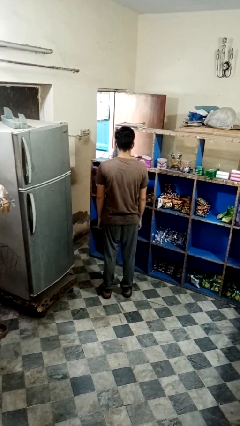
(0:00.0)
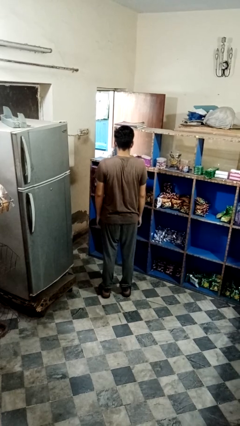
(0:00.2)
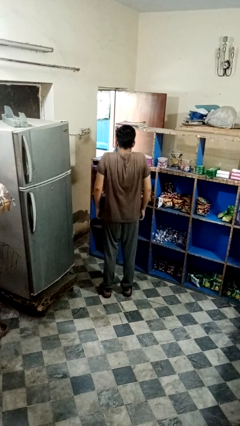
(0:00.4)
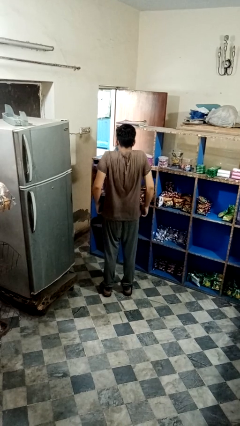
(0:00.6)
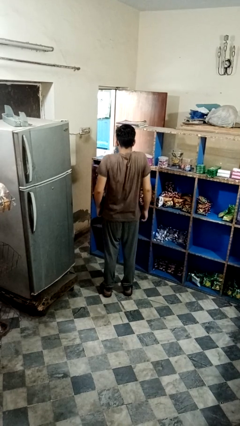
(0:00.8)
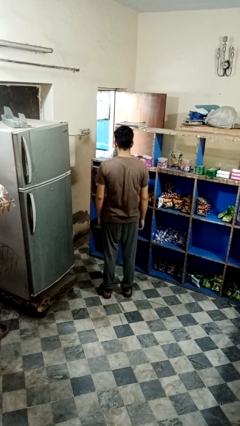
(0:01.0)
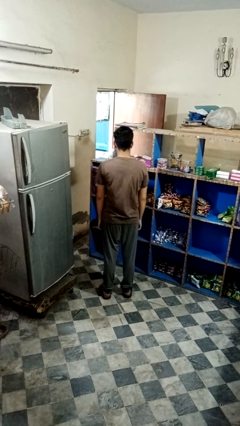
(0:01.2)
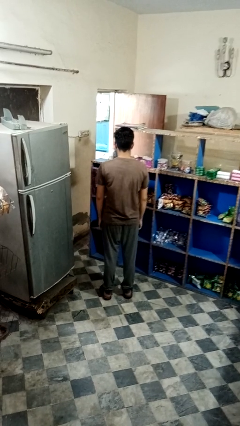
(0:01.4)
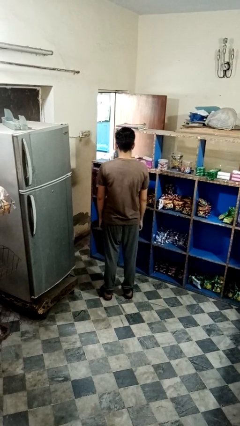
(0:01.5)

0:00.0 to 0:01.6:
person shrugs

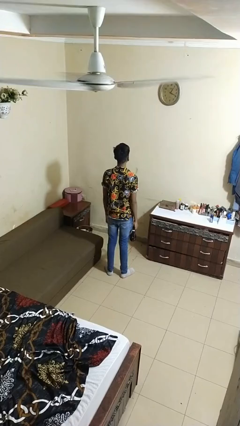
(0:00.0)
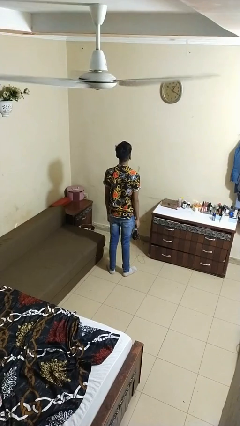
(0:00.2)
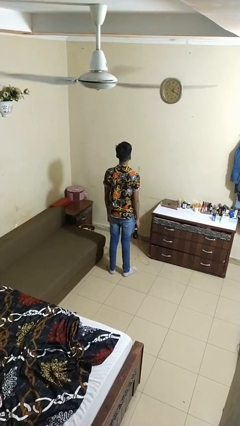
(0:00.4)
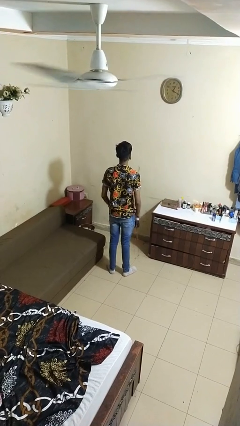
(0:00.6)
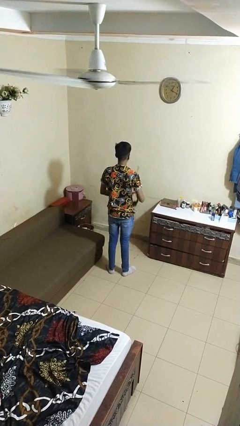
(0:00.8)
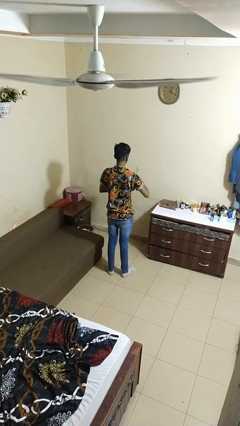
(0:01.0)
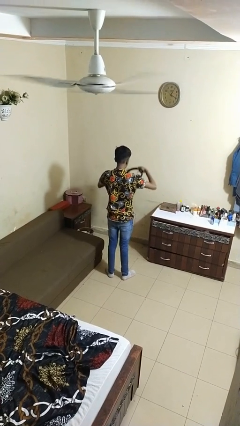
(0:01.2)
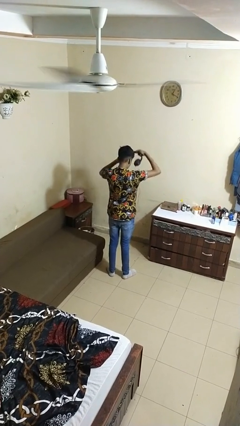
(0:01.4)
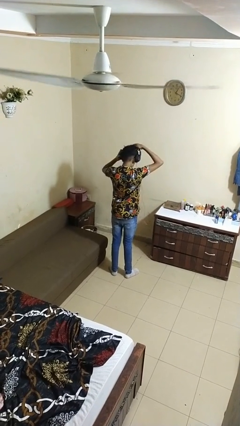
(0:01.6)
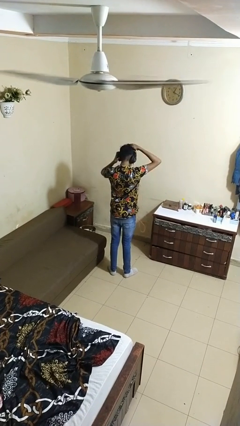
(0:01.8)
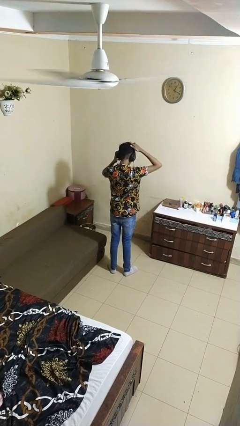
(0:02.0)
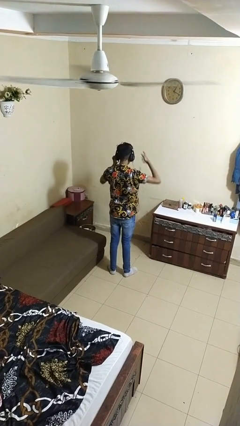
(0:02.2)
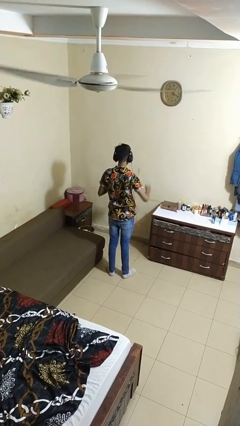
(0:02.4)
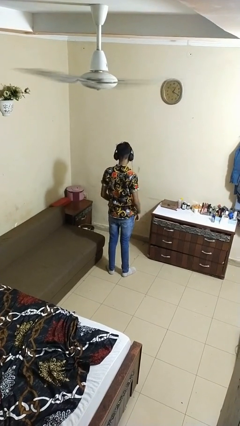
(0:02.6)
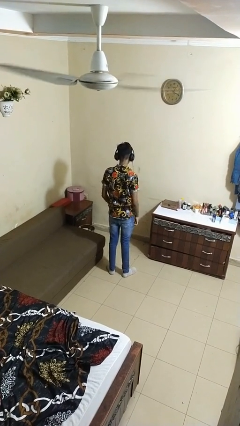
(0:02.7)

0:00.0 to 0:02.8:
person puts on headphones

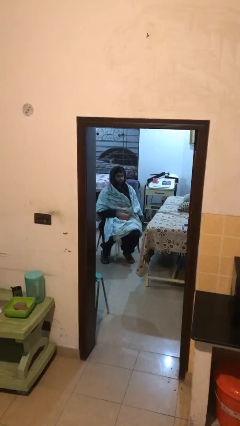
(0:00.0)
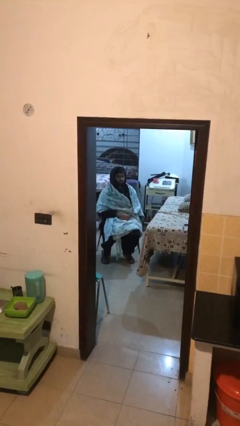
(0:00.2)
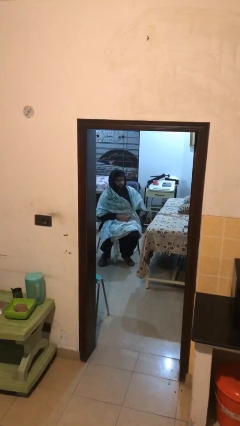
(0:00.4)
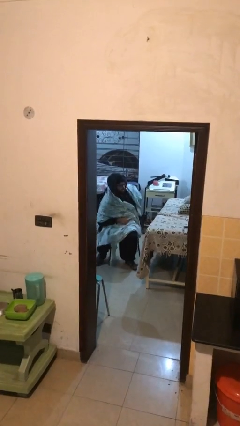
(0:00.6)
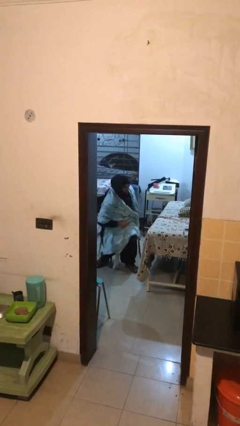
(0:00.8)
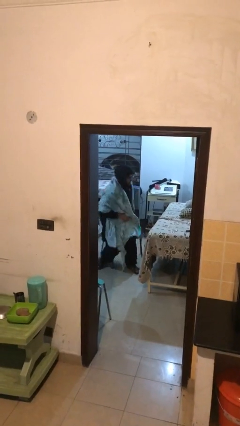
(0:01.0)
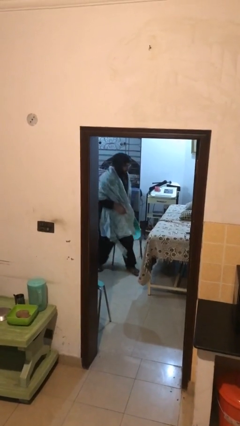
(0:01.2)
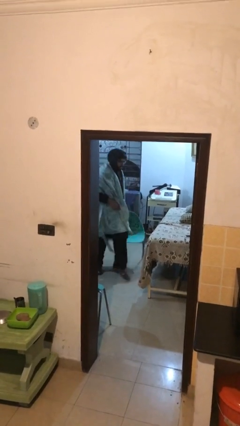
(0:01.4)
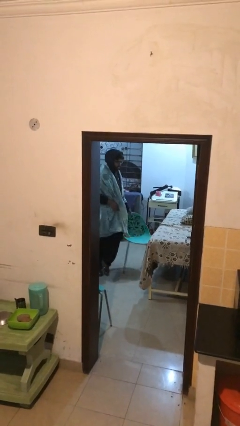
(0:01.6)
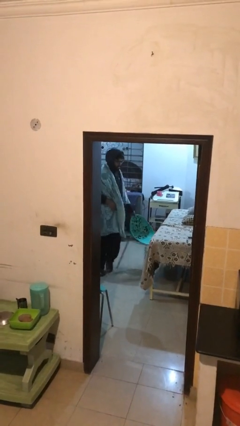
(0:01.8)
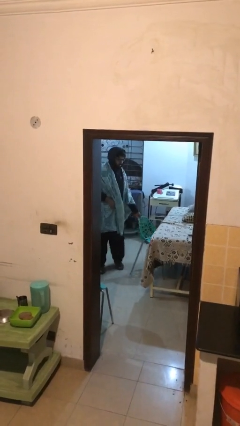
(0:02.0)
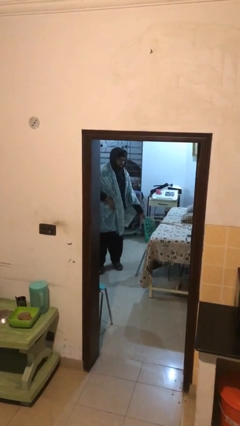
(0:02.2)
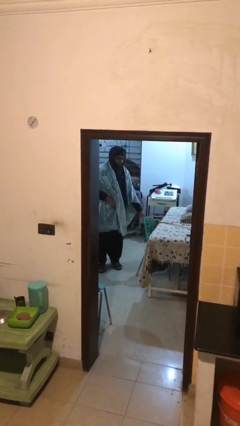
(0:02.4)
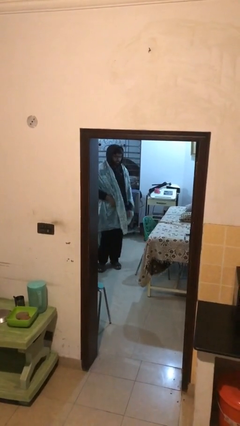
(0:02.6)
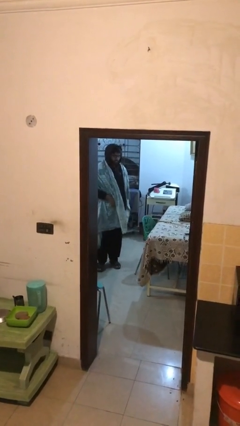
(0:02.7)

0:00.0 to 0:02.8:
person stands up

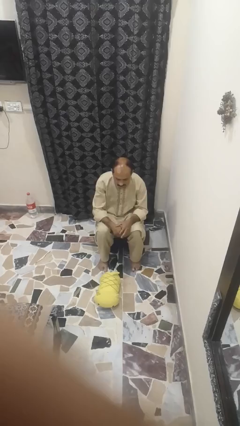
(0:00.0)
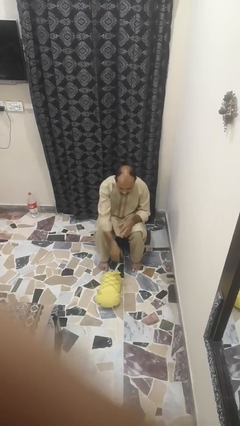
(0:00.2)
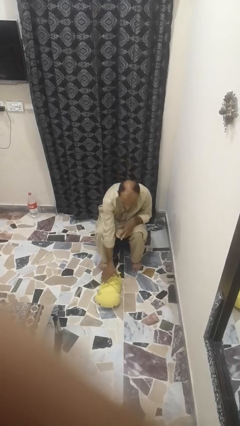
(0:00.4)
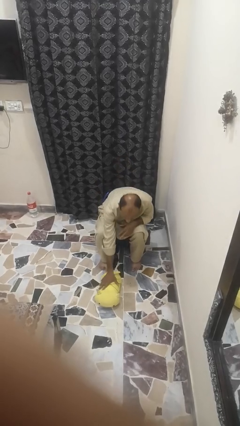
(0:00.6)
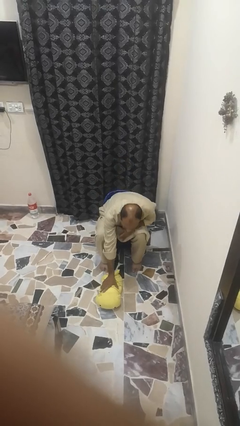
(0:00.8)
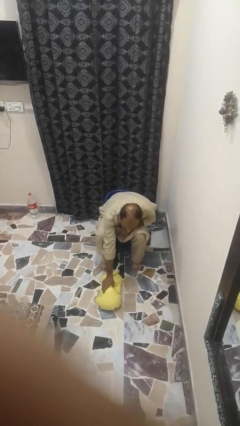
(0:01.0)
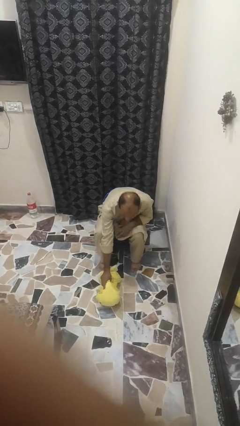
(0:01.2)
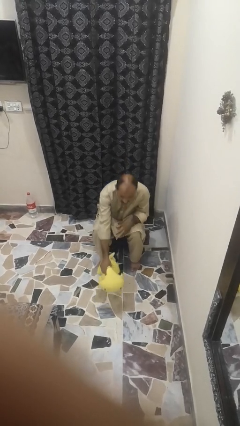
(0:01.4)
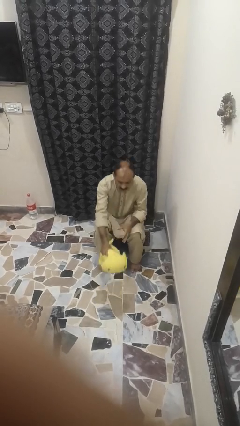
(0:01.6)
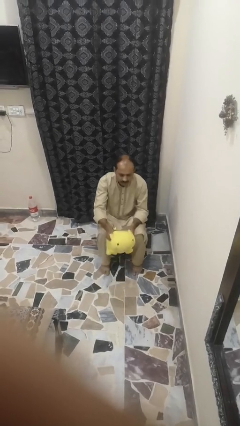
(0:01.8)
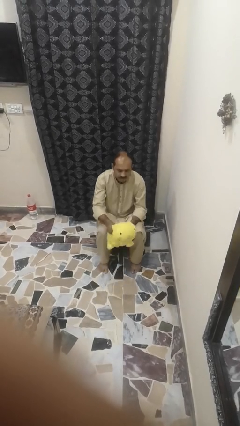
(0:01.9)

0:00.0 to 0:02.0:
person picks up object from floor

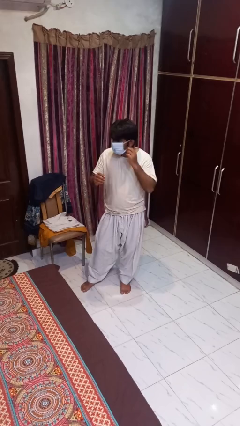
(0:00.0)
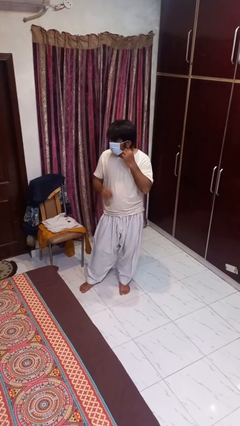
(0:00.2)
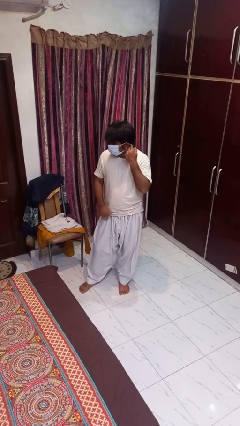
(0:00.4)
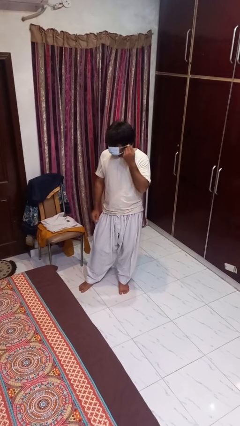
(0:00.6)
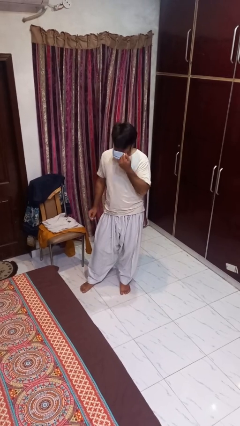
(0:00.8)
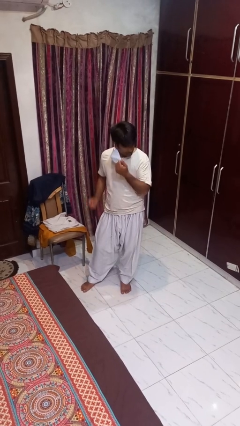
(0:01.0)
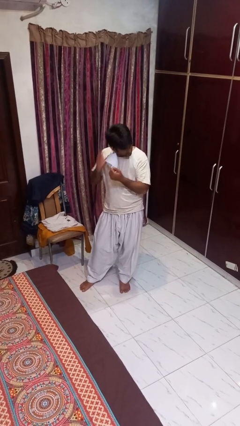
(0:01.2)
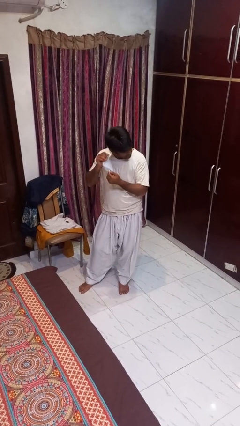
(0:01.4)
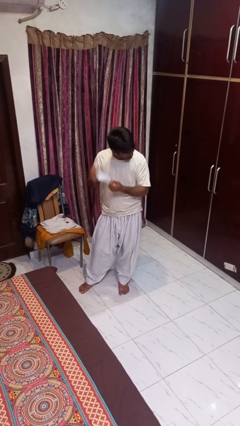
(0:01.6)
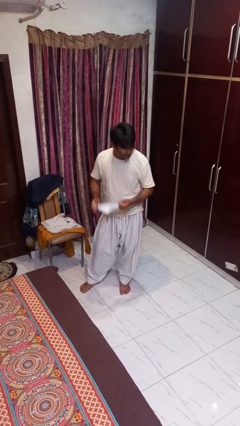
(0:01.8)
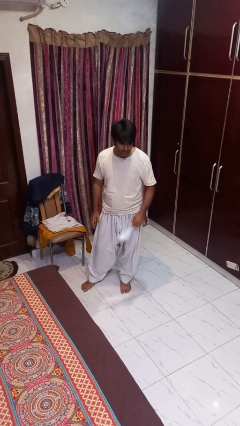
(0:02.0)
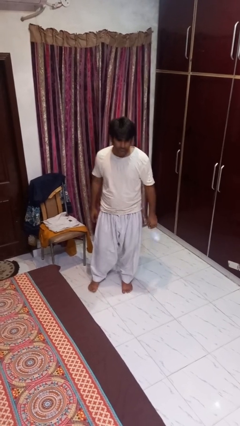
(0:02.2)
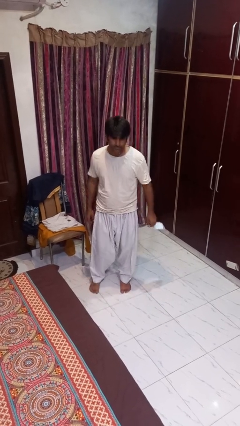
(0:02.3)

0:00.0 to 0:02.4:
person takes off facemask

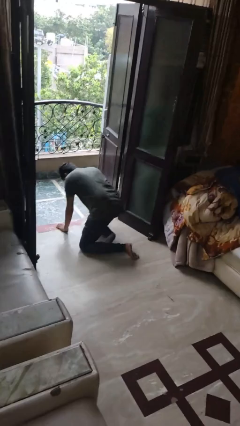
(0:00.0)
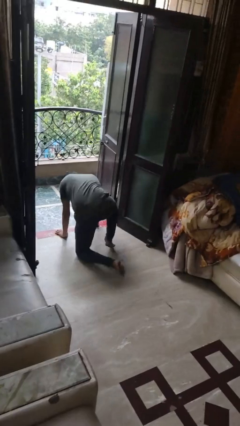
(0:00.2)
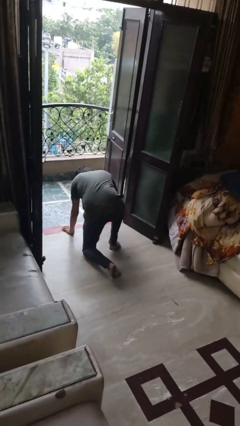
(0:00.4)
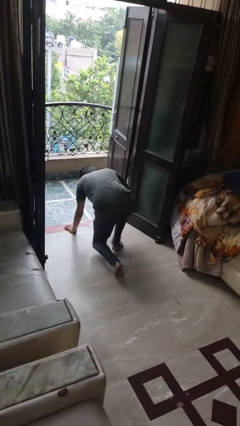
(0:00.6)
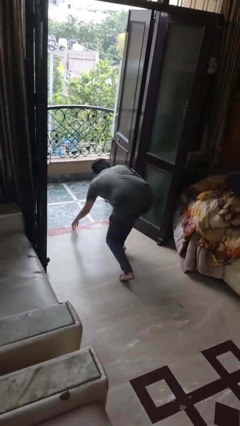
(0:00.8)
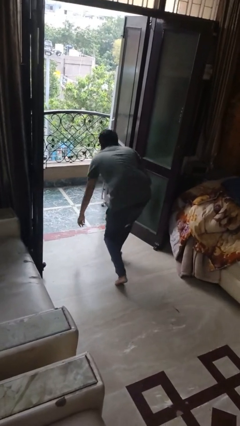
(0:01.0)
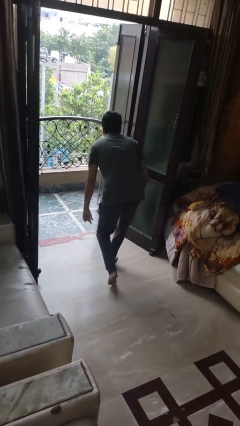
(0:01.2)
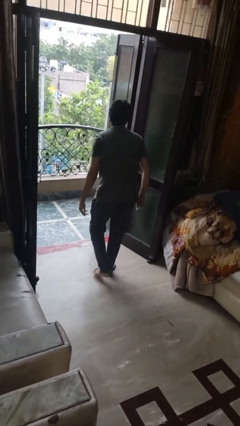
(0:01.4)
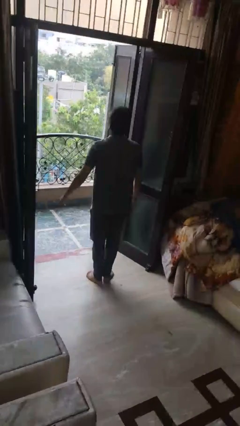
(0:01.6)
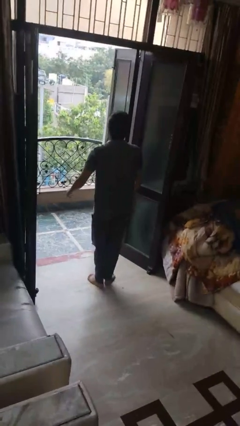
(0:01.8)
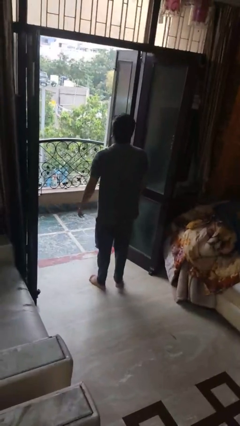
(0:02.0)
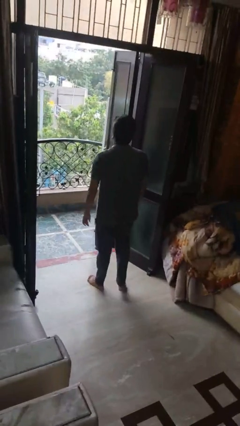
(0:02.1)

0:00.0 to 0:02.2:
person stands up from floor

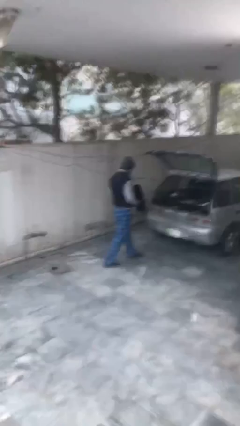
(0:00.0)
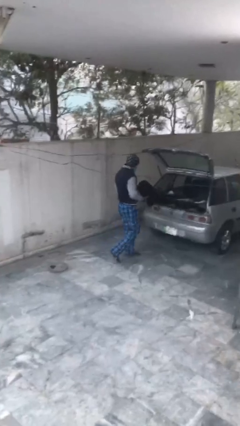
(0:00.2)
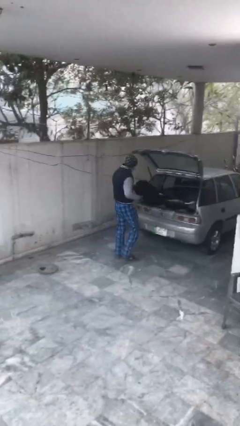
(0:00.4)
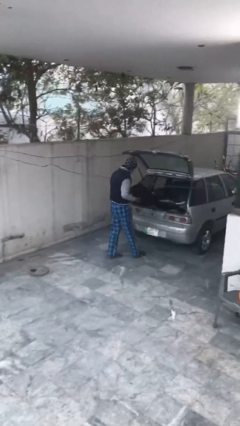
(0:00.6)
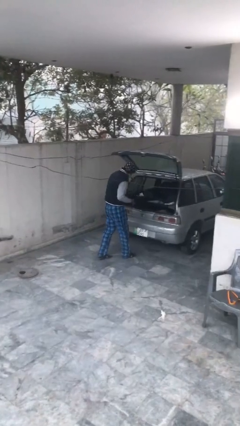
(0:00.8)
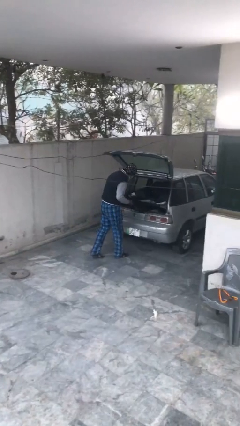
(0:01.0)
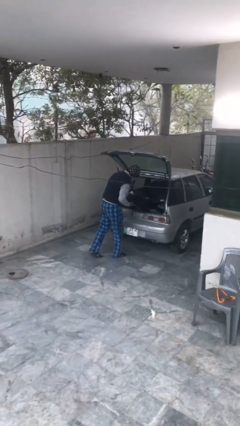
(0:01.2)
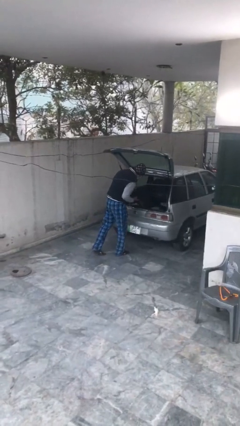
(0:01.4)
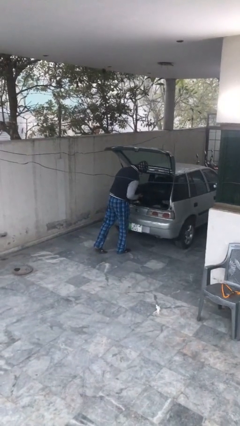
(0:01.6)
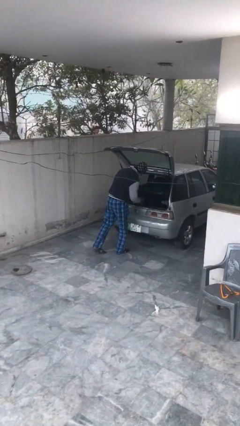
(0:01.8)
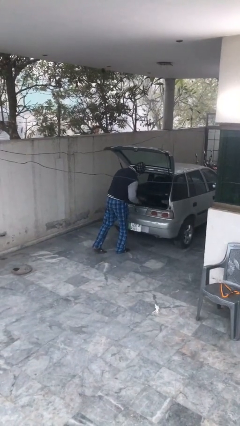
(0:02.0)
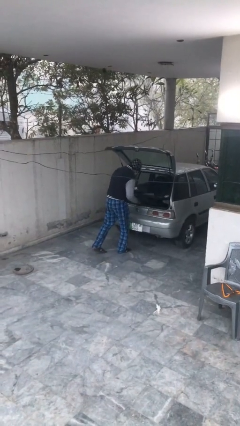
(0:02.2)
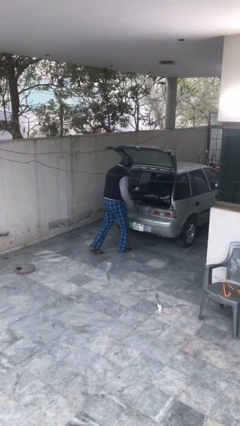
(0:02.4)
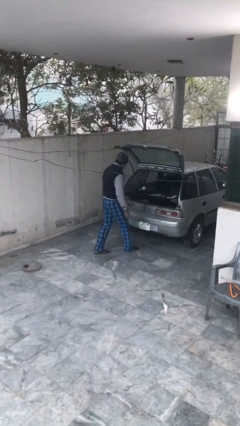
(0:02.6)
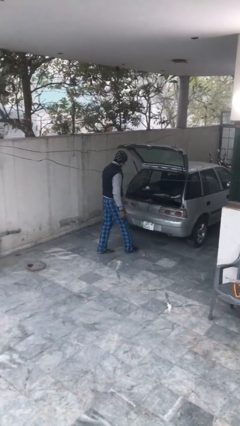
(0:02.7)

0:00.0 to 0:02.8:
person loads car

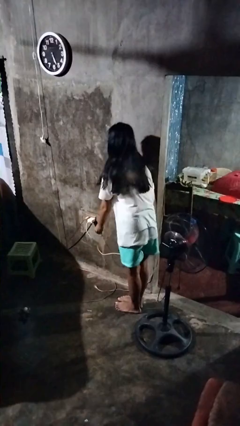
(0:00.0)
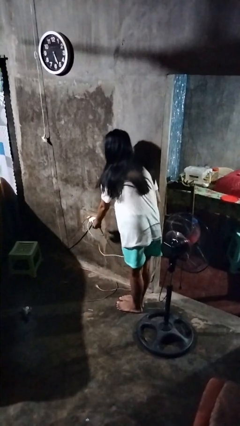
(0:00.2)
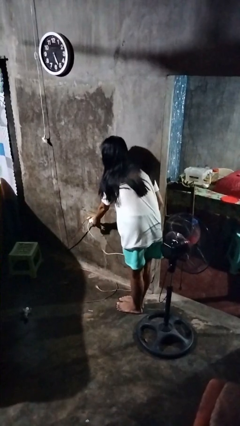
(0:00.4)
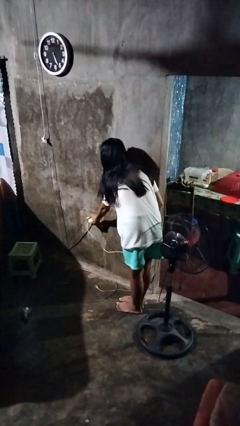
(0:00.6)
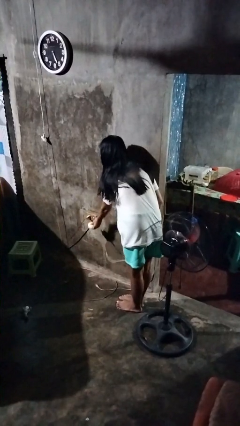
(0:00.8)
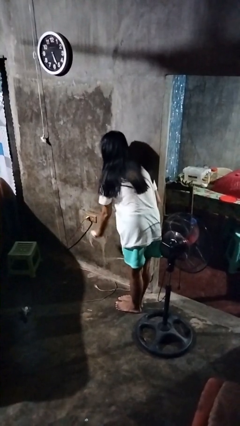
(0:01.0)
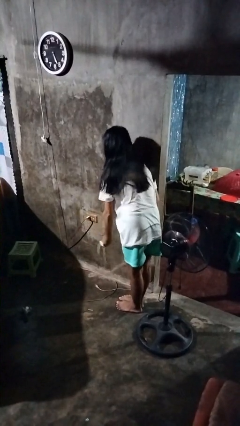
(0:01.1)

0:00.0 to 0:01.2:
person unplugs from electrical socket
